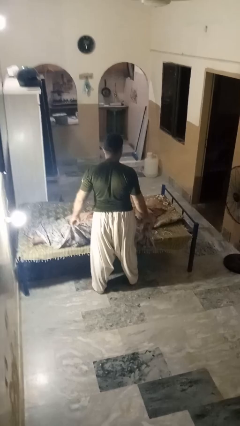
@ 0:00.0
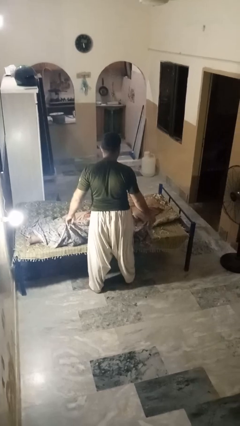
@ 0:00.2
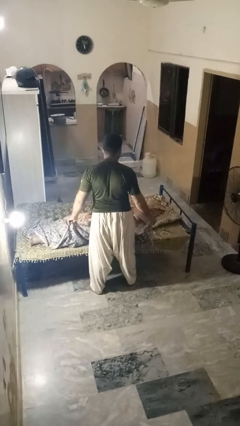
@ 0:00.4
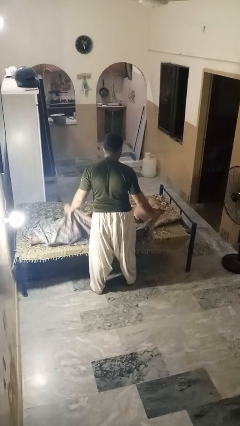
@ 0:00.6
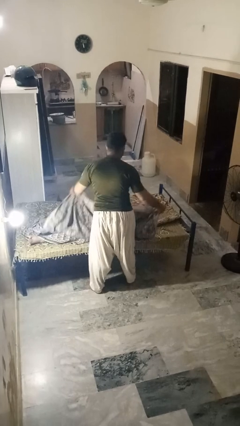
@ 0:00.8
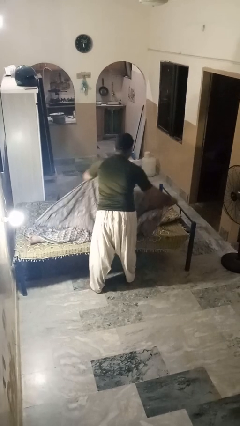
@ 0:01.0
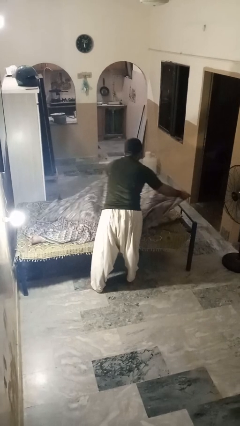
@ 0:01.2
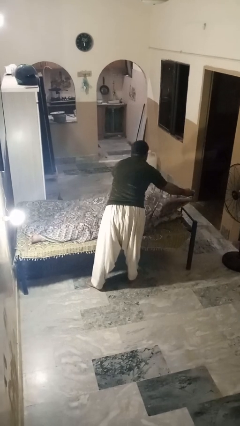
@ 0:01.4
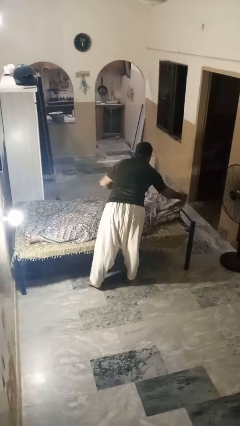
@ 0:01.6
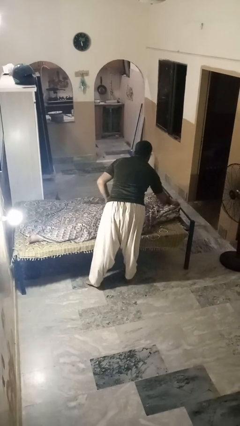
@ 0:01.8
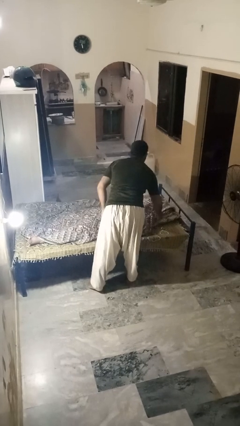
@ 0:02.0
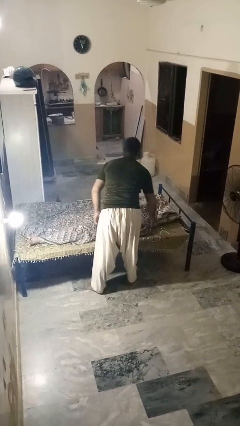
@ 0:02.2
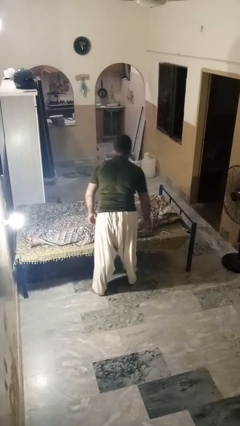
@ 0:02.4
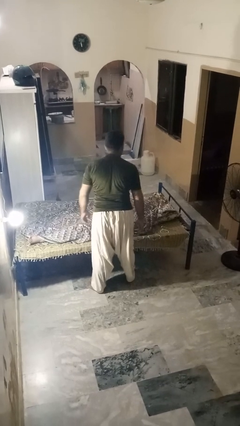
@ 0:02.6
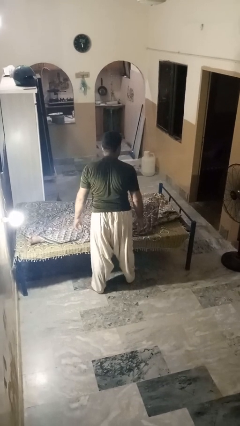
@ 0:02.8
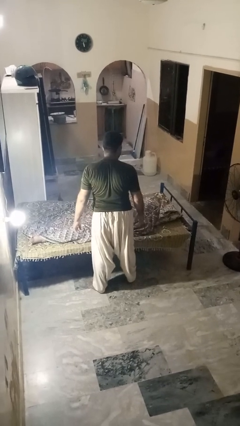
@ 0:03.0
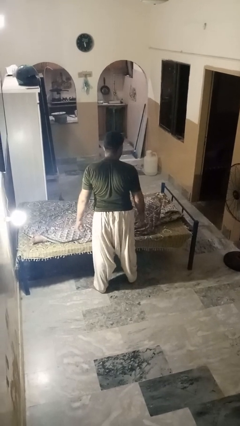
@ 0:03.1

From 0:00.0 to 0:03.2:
person covers friend with blanket

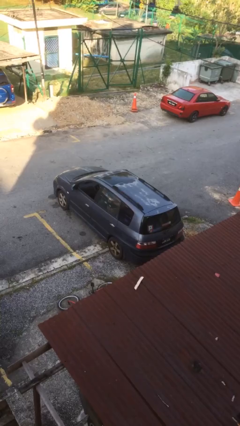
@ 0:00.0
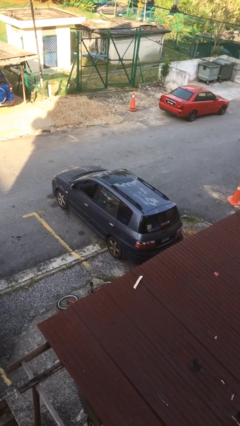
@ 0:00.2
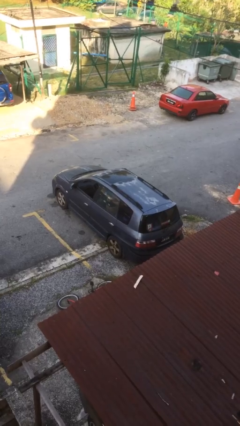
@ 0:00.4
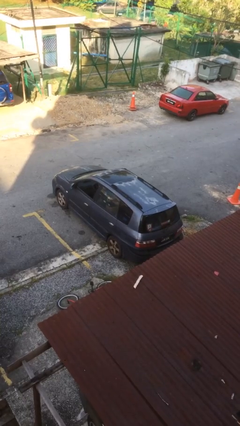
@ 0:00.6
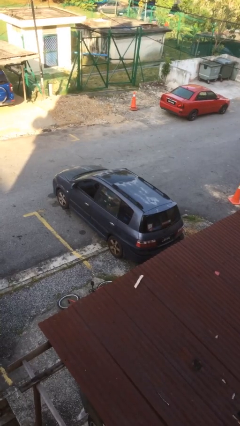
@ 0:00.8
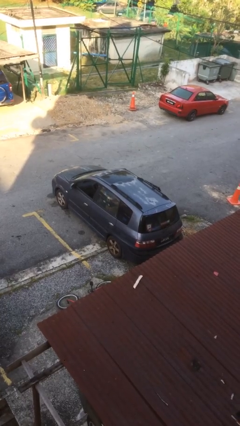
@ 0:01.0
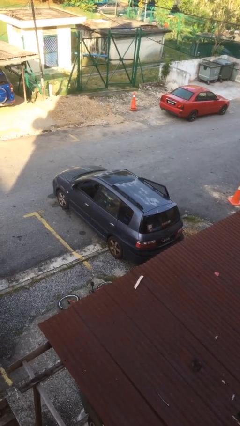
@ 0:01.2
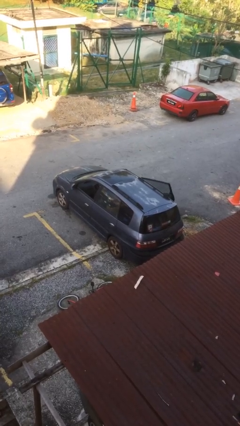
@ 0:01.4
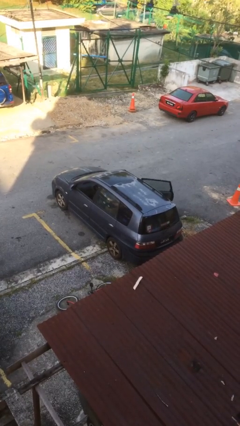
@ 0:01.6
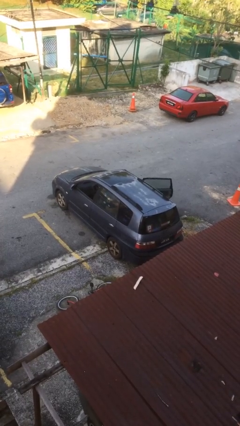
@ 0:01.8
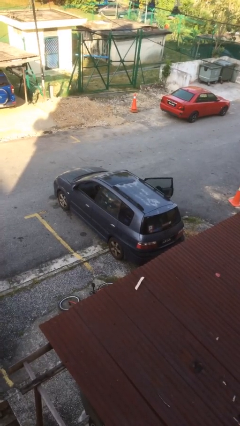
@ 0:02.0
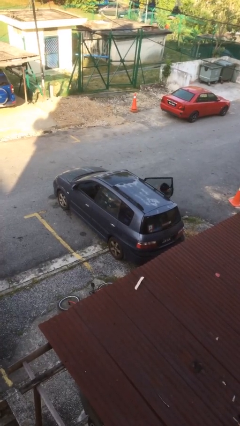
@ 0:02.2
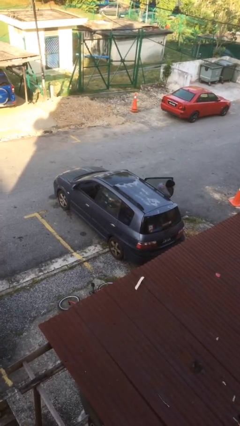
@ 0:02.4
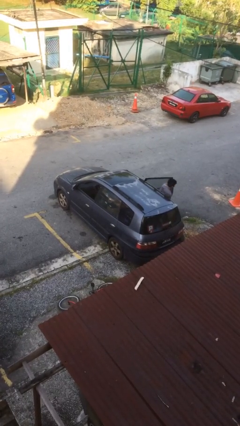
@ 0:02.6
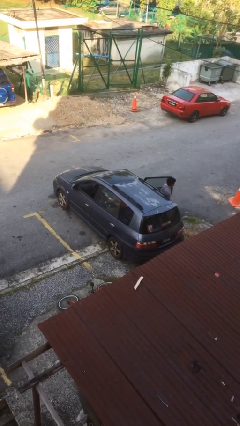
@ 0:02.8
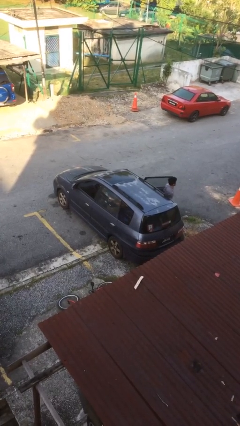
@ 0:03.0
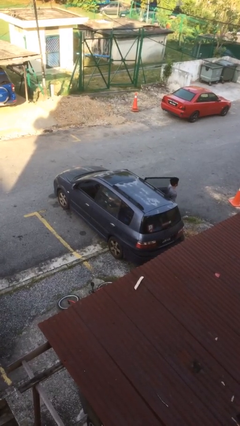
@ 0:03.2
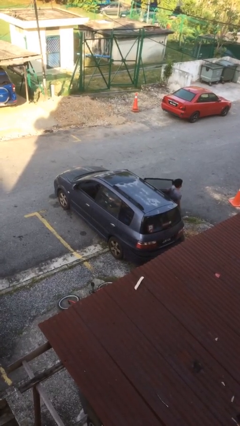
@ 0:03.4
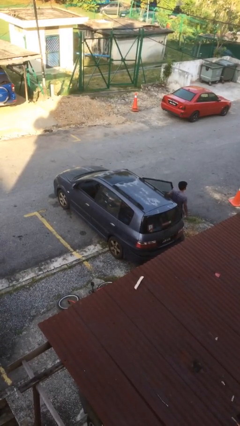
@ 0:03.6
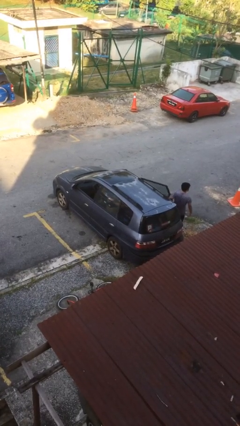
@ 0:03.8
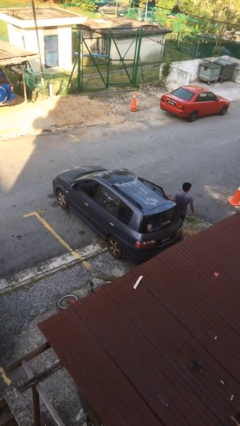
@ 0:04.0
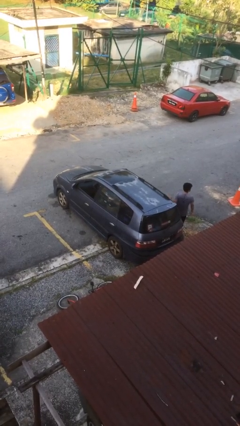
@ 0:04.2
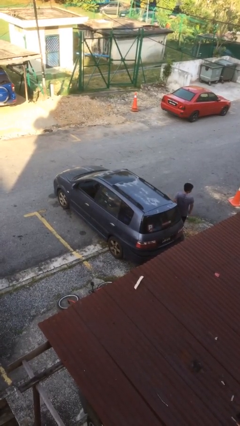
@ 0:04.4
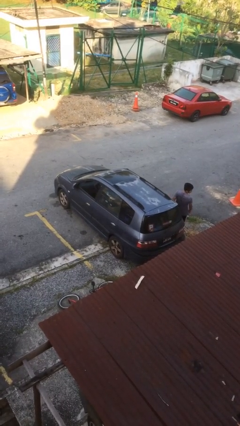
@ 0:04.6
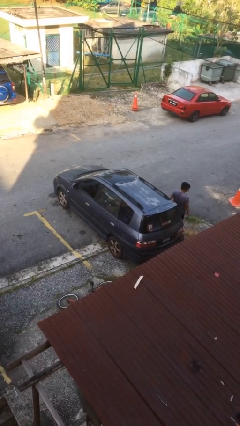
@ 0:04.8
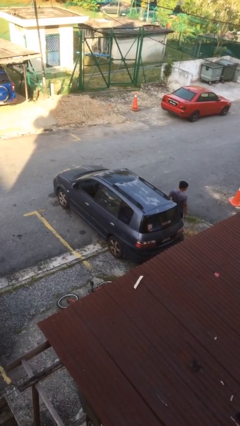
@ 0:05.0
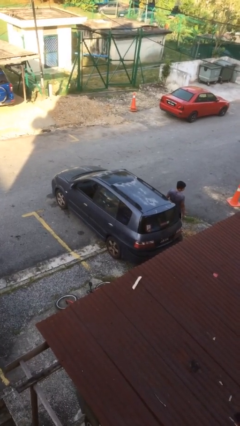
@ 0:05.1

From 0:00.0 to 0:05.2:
car drops off person

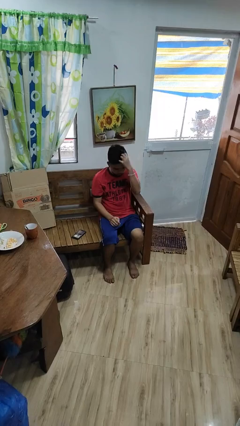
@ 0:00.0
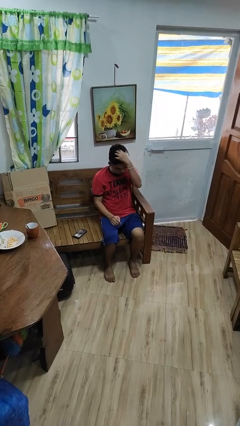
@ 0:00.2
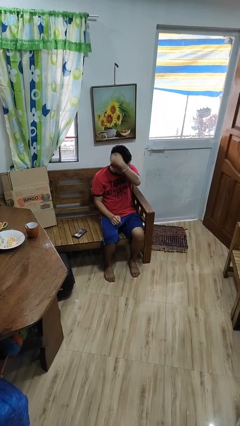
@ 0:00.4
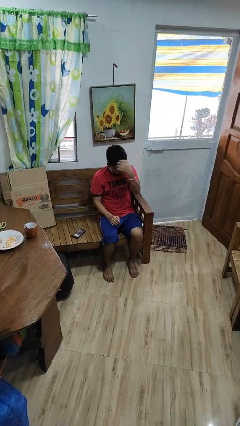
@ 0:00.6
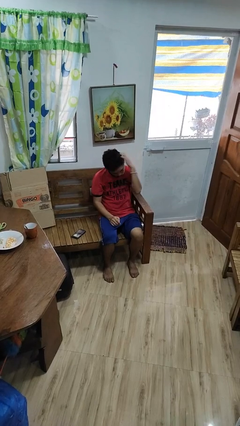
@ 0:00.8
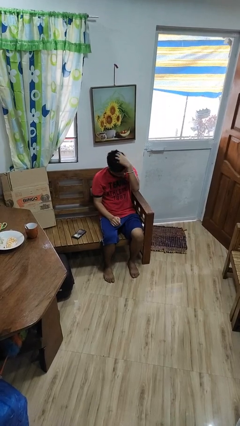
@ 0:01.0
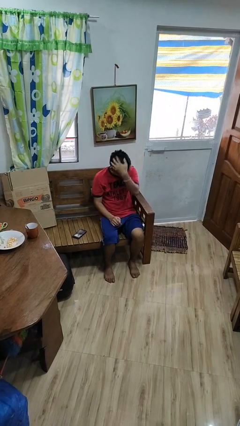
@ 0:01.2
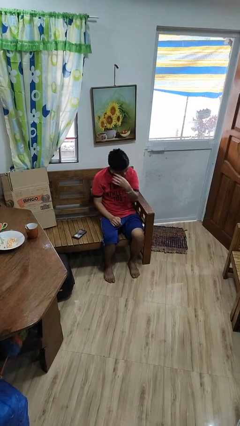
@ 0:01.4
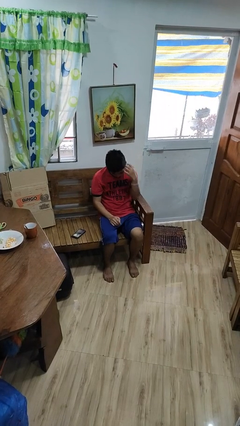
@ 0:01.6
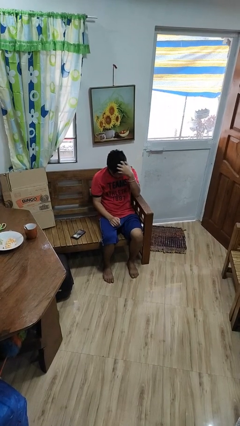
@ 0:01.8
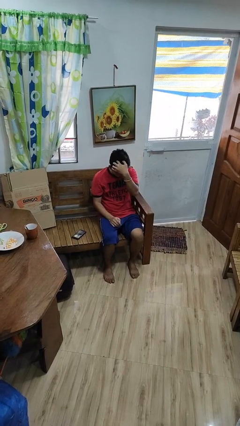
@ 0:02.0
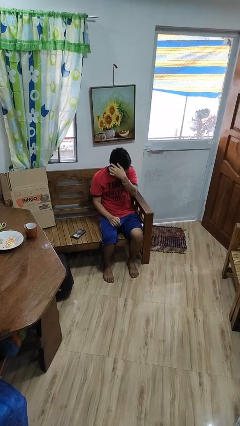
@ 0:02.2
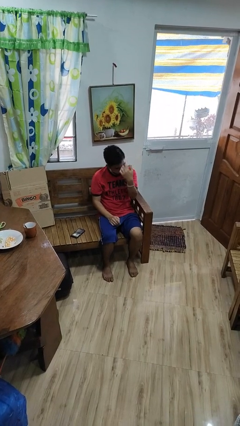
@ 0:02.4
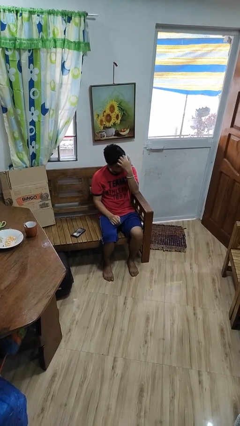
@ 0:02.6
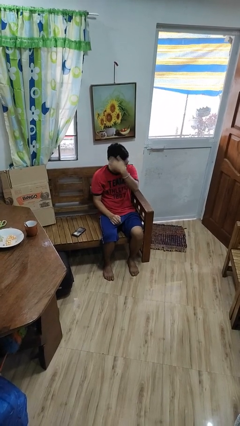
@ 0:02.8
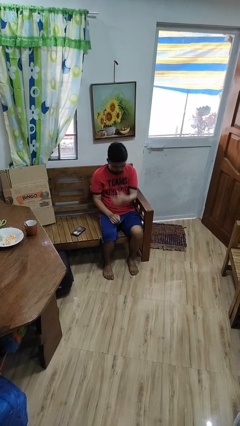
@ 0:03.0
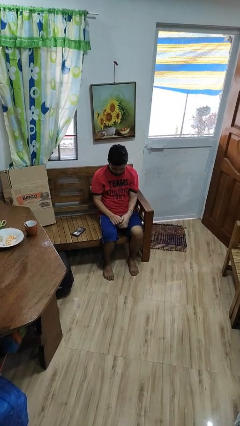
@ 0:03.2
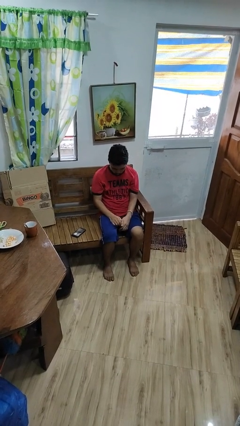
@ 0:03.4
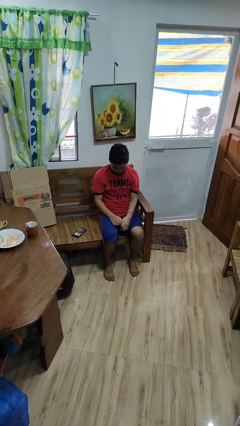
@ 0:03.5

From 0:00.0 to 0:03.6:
person strokes hair

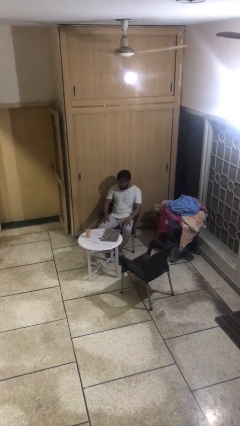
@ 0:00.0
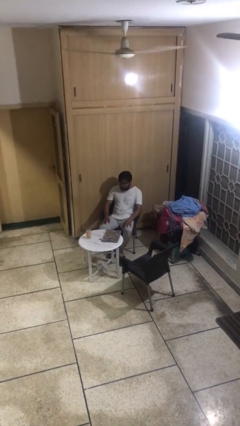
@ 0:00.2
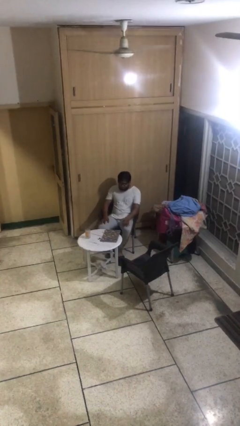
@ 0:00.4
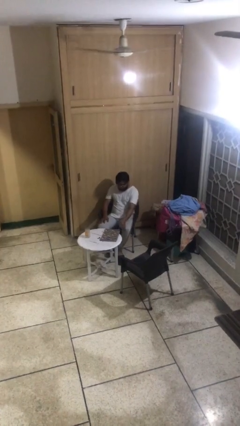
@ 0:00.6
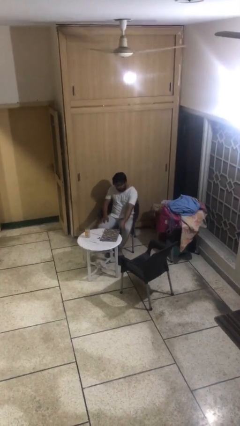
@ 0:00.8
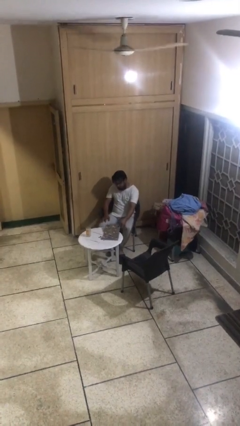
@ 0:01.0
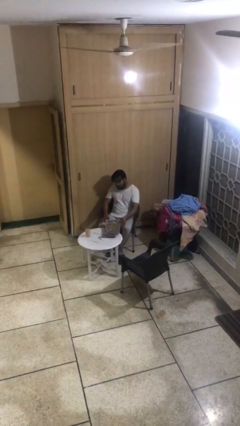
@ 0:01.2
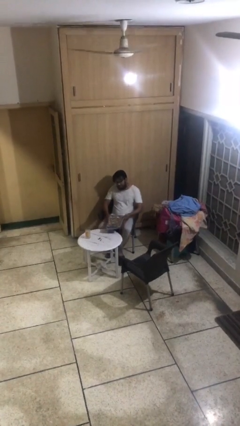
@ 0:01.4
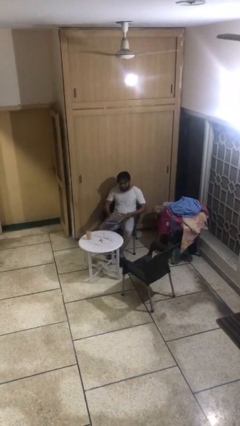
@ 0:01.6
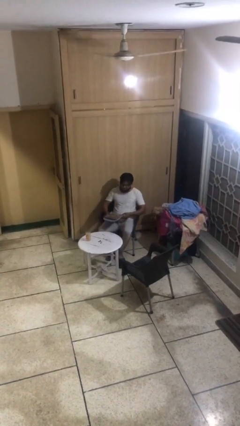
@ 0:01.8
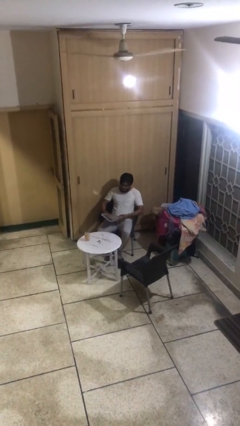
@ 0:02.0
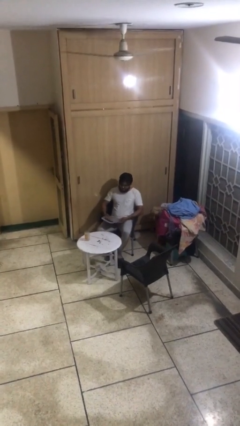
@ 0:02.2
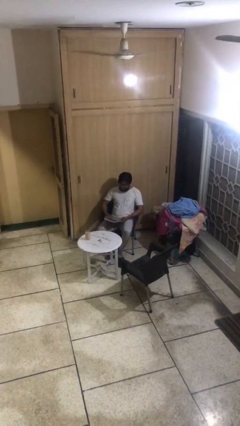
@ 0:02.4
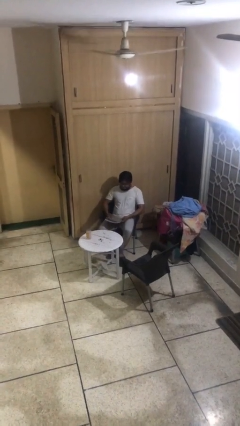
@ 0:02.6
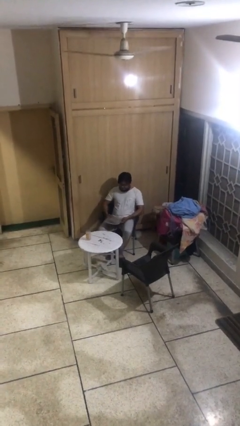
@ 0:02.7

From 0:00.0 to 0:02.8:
person picks up object from table

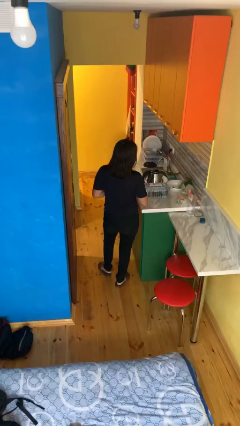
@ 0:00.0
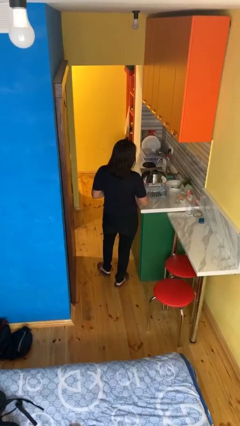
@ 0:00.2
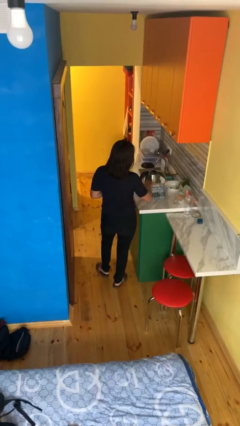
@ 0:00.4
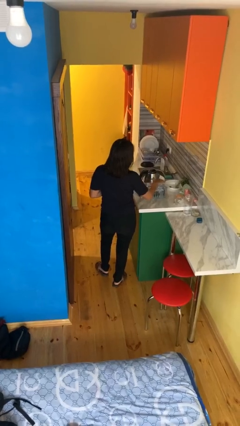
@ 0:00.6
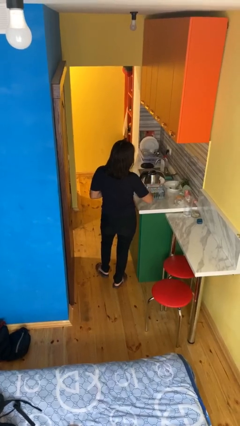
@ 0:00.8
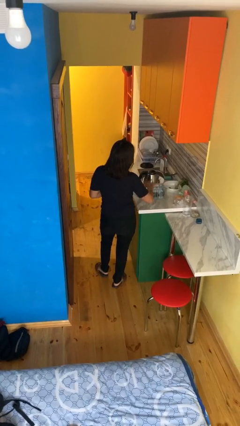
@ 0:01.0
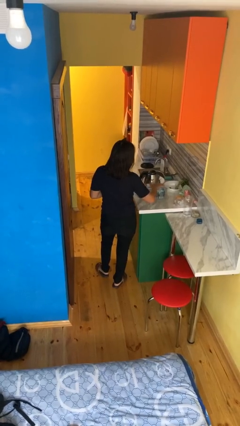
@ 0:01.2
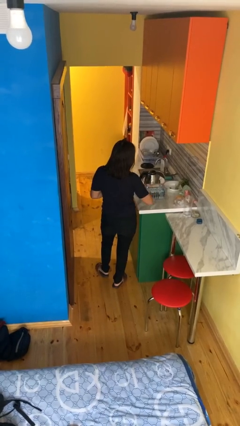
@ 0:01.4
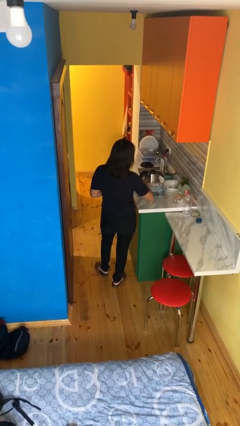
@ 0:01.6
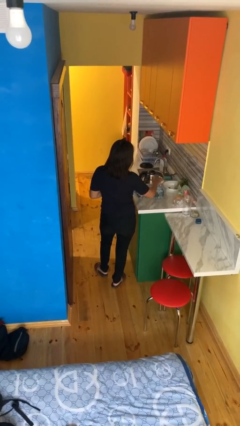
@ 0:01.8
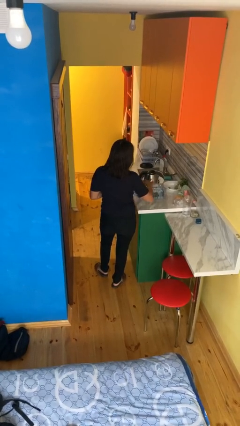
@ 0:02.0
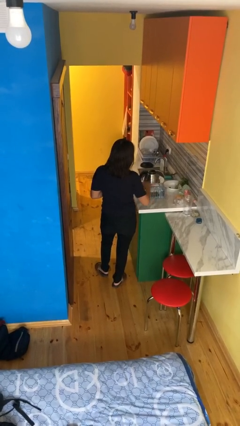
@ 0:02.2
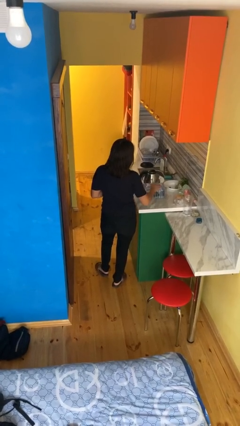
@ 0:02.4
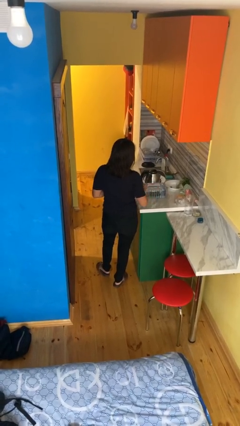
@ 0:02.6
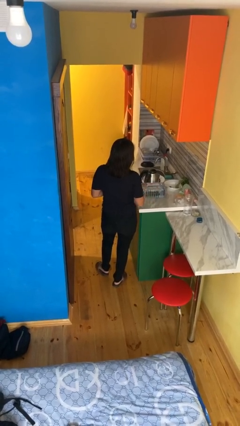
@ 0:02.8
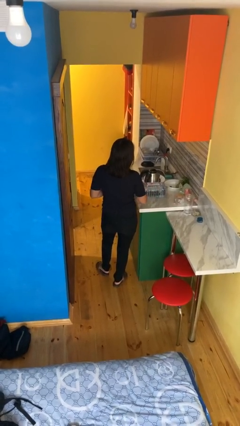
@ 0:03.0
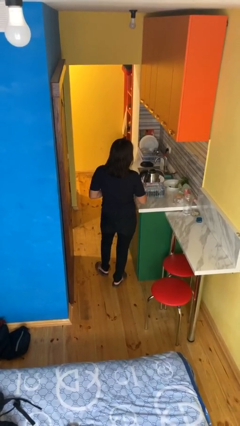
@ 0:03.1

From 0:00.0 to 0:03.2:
person waves hand over object
